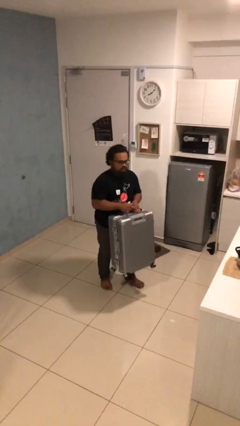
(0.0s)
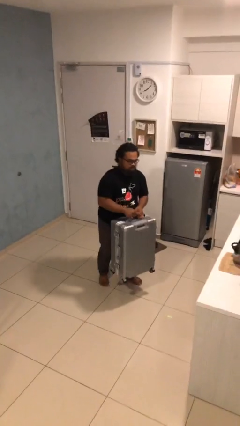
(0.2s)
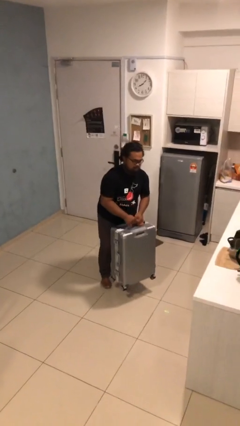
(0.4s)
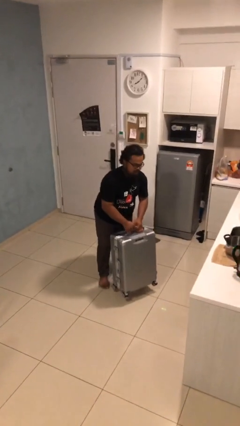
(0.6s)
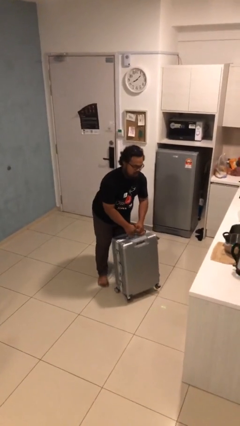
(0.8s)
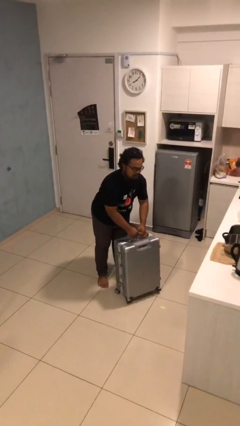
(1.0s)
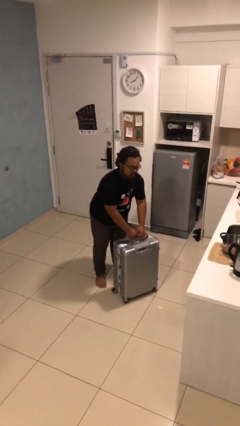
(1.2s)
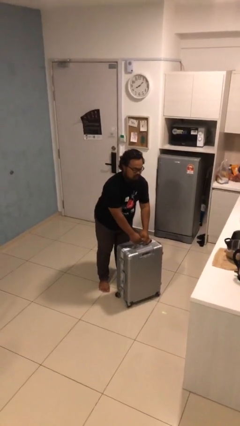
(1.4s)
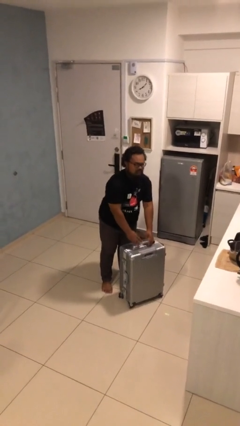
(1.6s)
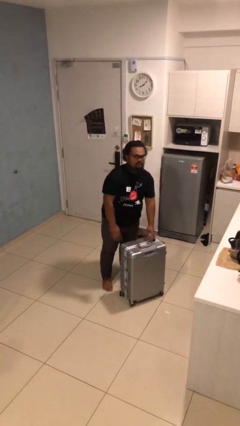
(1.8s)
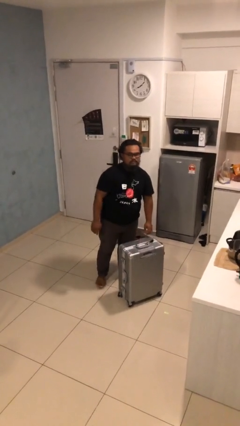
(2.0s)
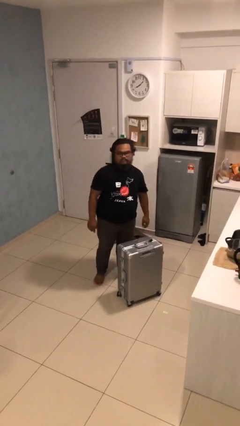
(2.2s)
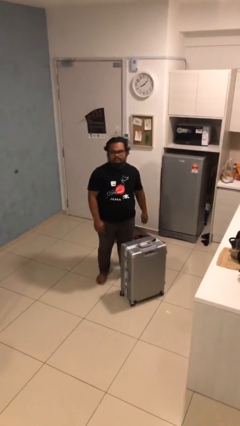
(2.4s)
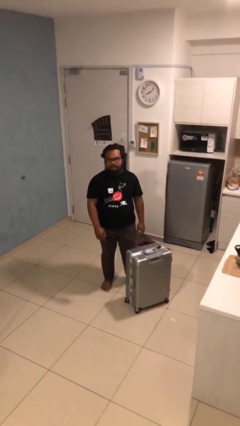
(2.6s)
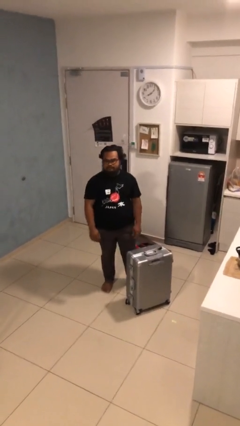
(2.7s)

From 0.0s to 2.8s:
person puts down object on floor

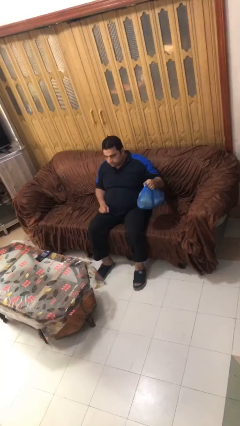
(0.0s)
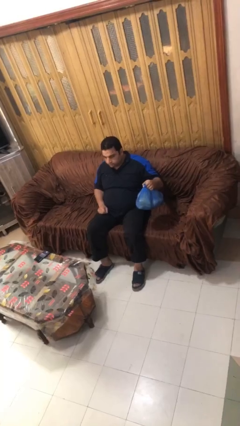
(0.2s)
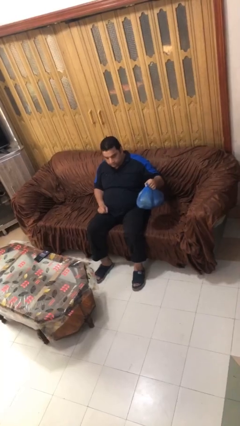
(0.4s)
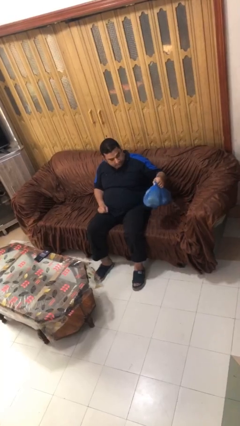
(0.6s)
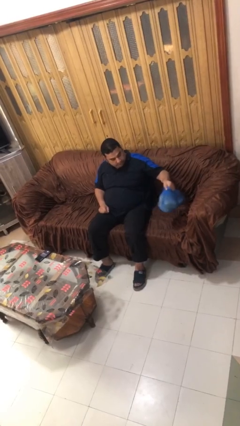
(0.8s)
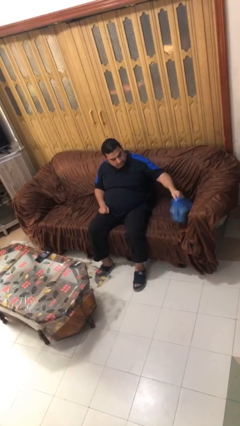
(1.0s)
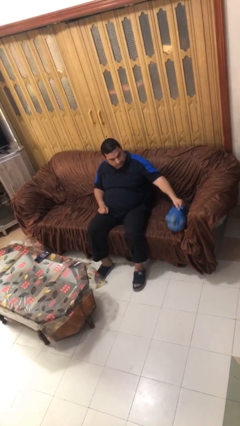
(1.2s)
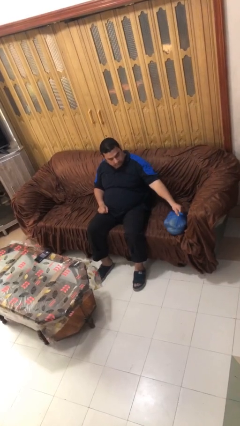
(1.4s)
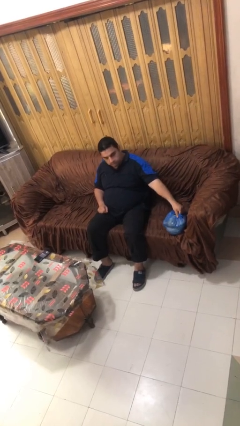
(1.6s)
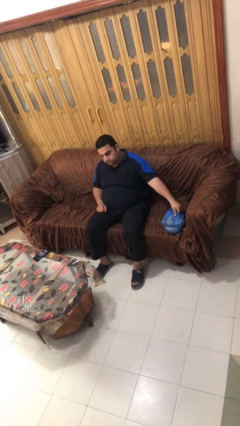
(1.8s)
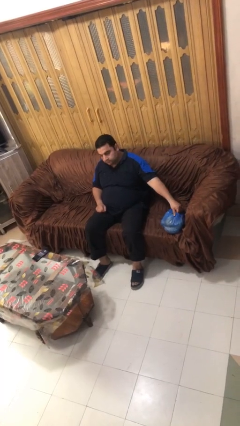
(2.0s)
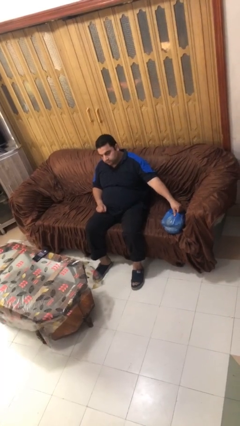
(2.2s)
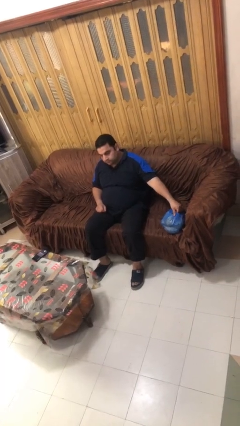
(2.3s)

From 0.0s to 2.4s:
person puts down object on couch

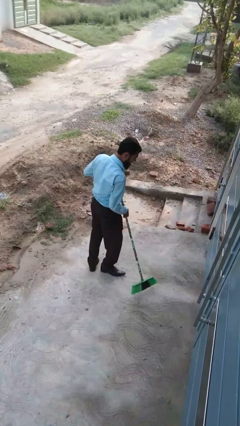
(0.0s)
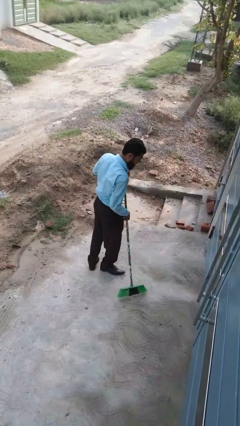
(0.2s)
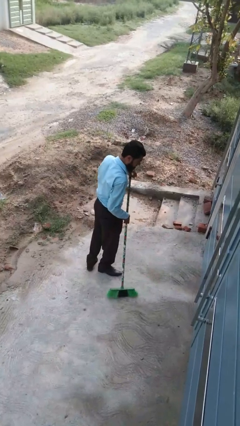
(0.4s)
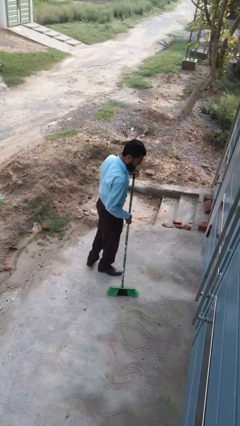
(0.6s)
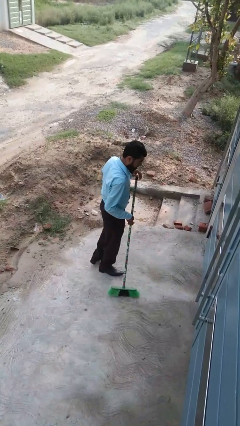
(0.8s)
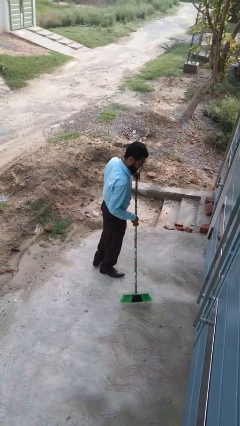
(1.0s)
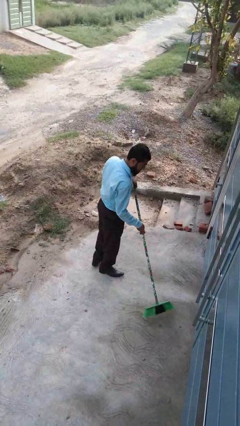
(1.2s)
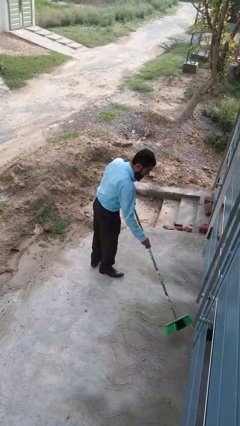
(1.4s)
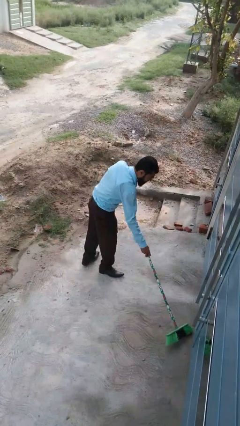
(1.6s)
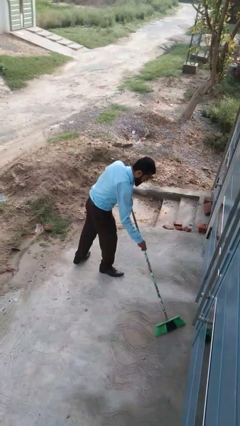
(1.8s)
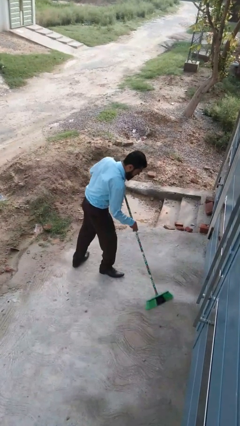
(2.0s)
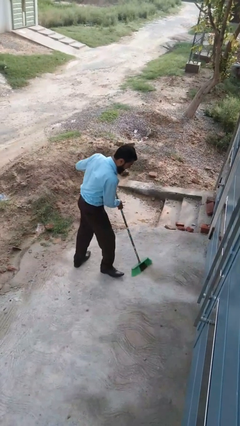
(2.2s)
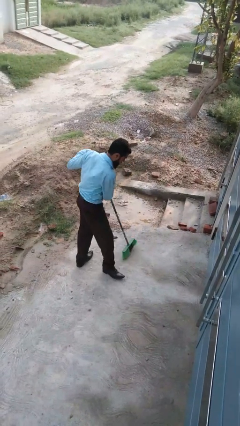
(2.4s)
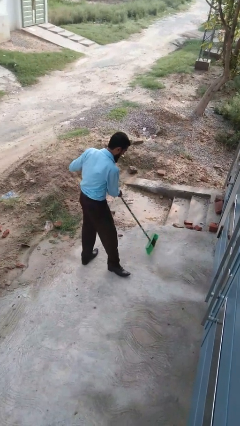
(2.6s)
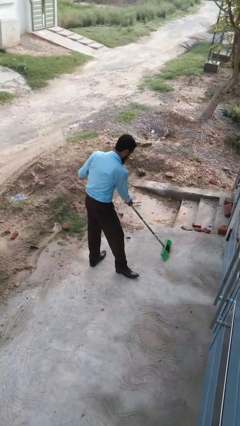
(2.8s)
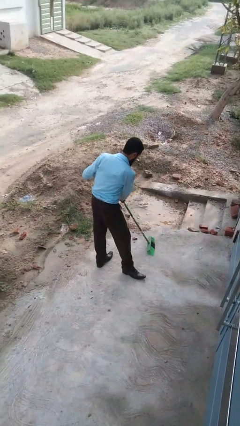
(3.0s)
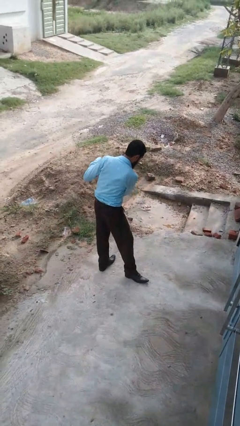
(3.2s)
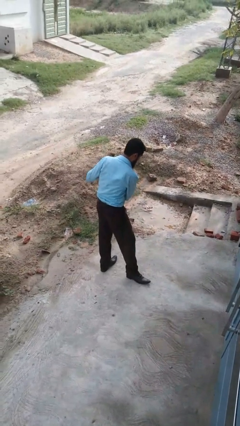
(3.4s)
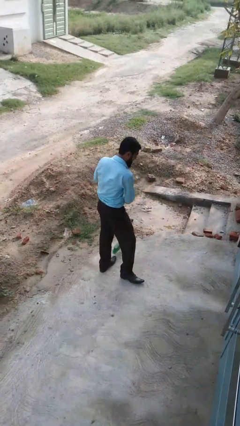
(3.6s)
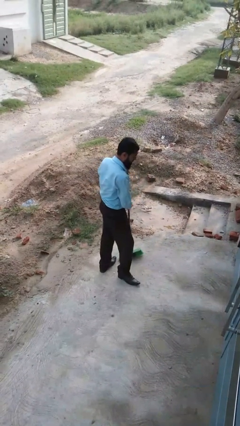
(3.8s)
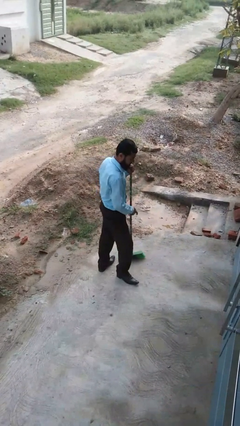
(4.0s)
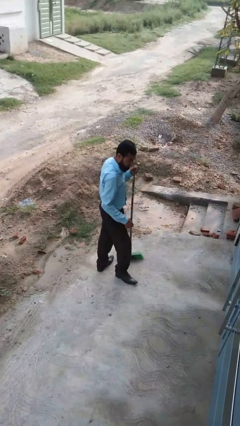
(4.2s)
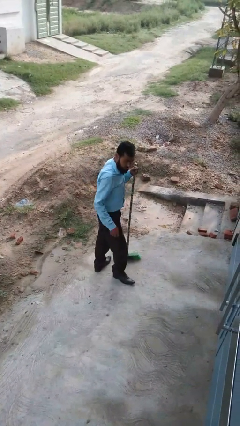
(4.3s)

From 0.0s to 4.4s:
person sweeps floor

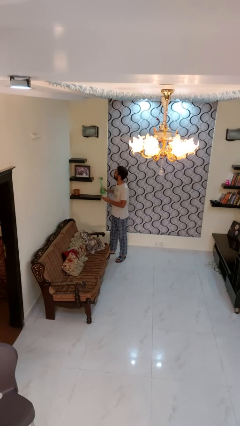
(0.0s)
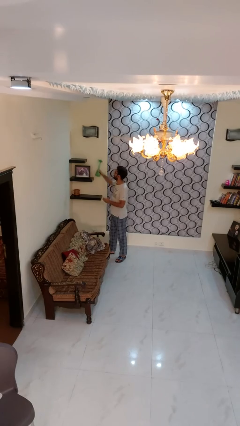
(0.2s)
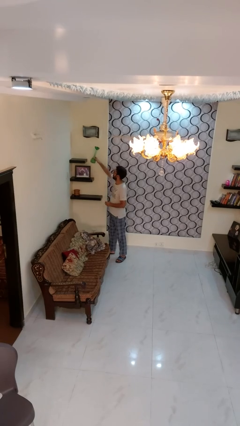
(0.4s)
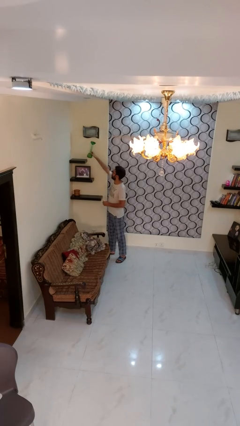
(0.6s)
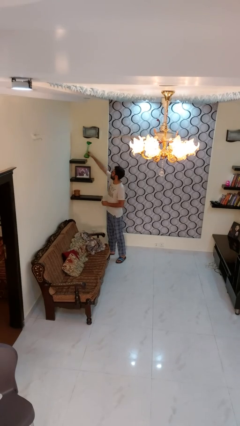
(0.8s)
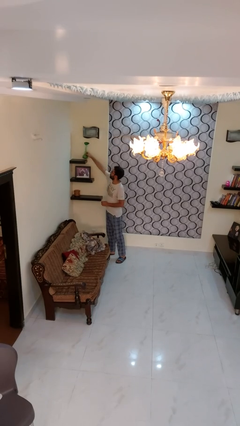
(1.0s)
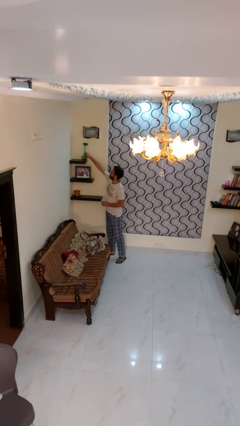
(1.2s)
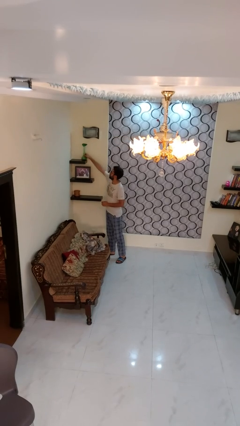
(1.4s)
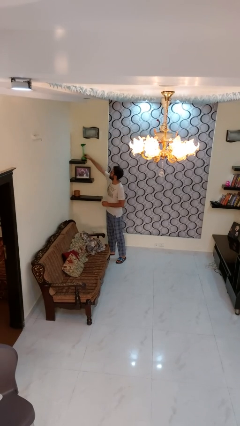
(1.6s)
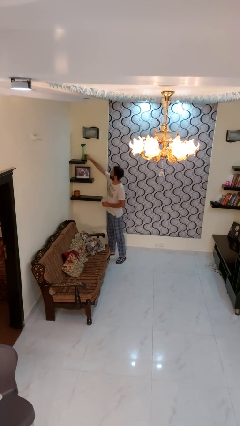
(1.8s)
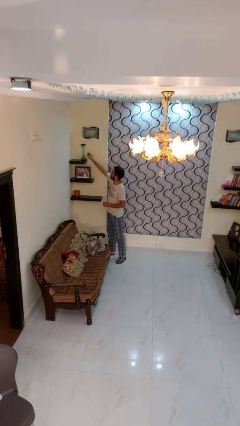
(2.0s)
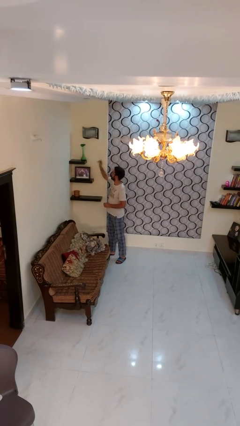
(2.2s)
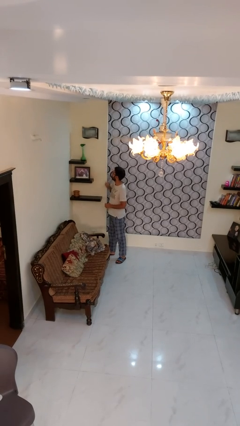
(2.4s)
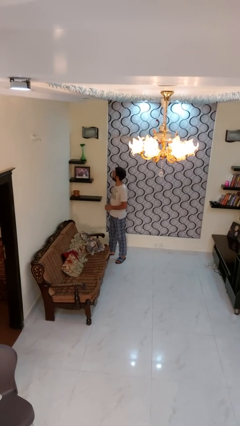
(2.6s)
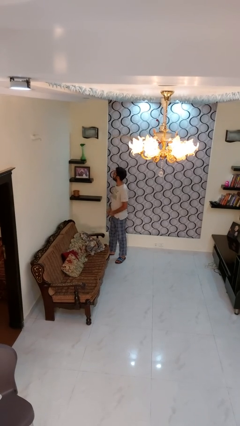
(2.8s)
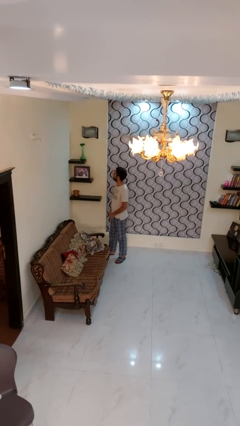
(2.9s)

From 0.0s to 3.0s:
person puts down object on shelf

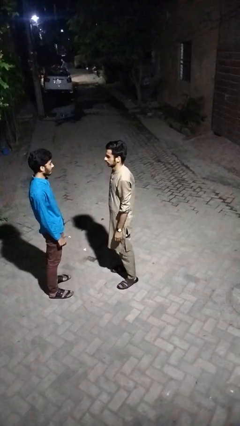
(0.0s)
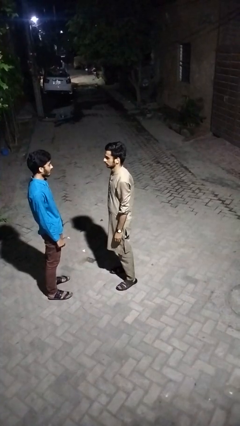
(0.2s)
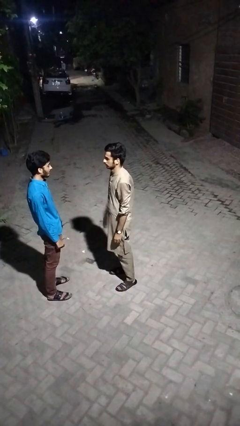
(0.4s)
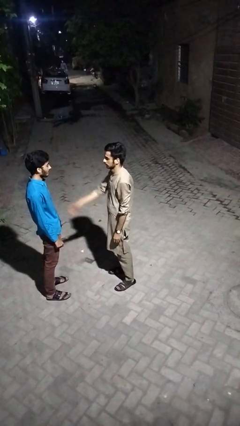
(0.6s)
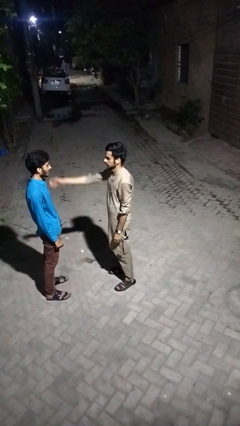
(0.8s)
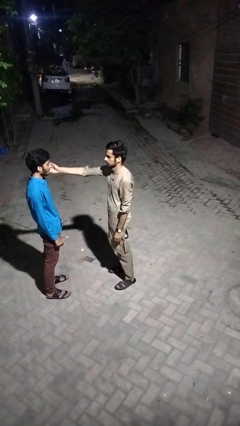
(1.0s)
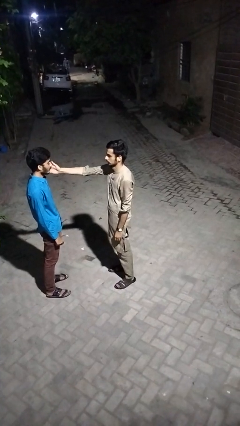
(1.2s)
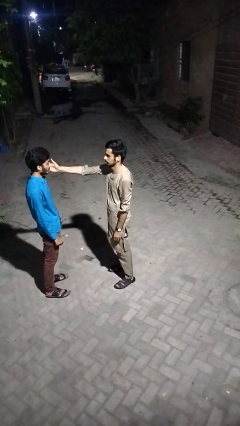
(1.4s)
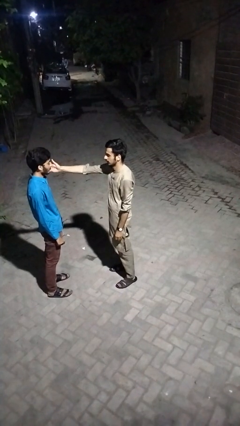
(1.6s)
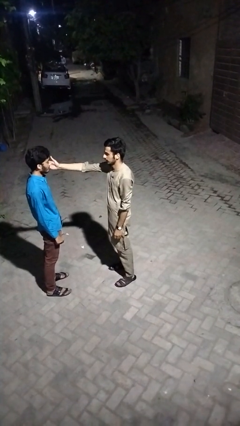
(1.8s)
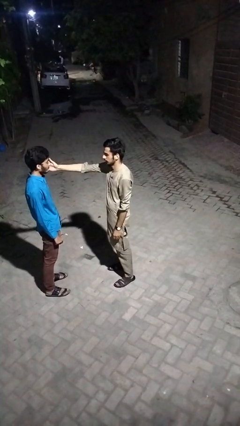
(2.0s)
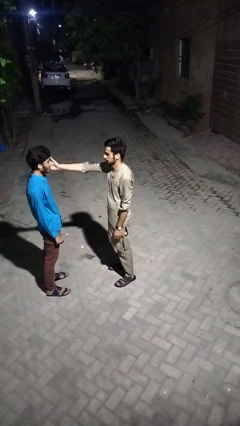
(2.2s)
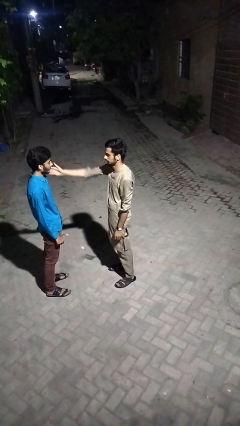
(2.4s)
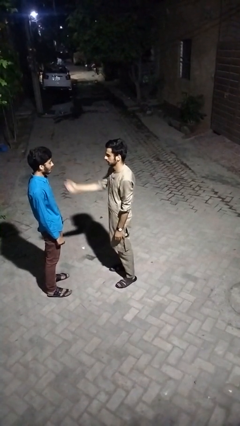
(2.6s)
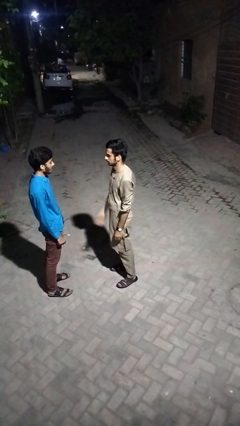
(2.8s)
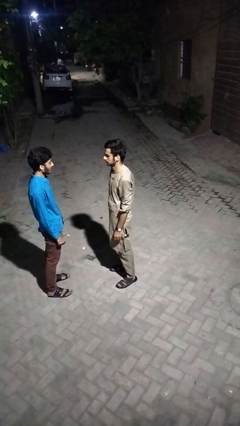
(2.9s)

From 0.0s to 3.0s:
person touches face of person

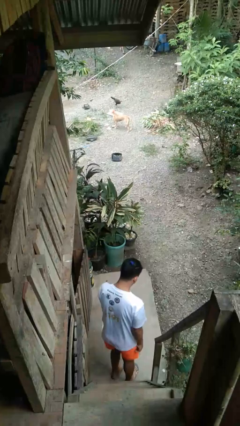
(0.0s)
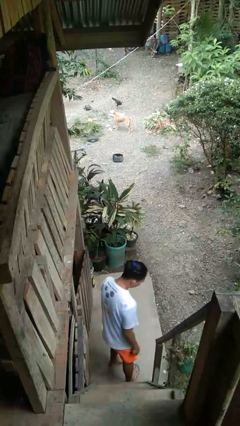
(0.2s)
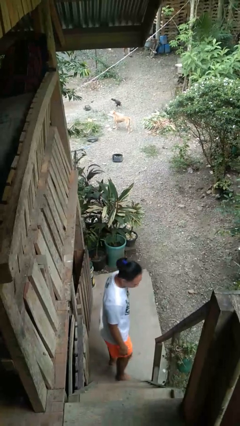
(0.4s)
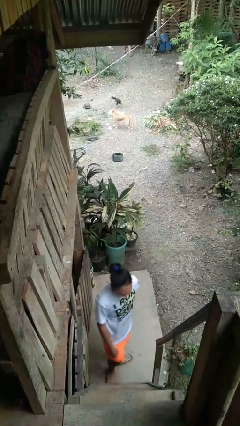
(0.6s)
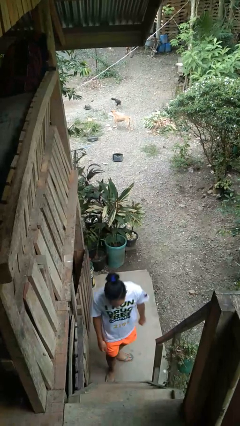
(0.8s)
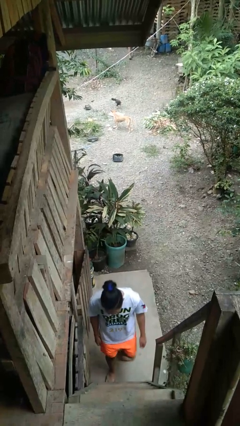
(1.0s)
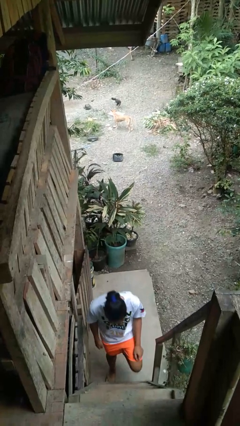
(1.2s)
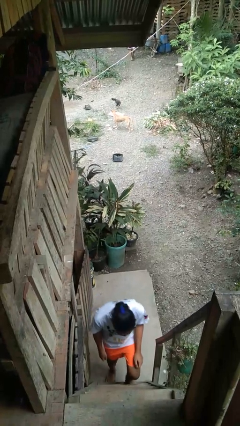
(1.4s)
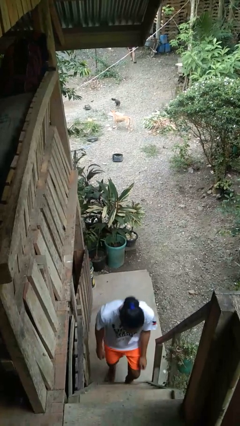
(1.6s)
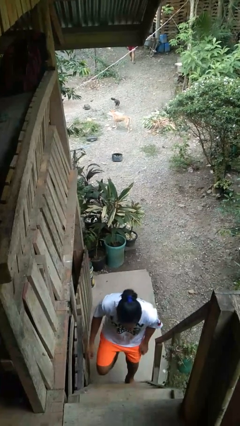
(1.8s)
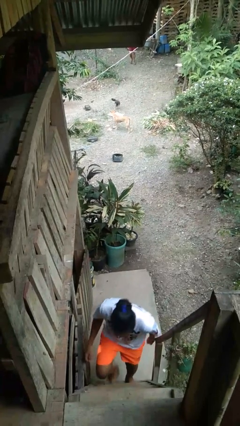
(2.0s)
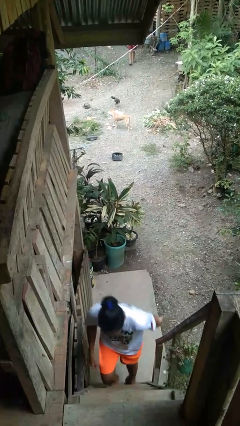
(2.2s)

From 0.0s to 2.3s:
person climbs up stairs
